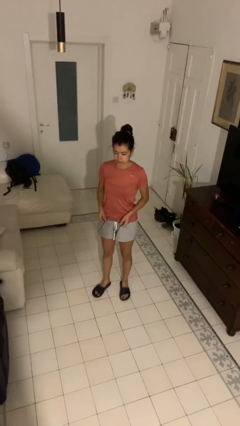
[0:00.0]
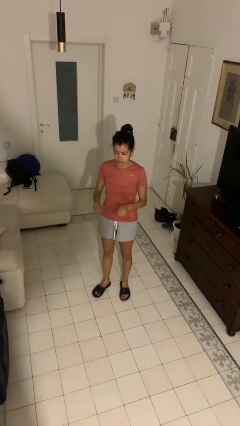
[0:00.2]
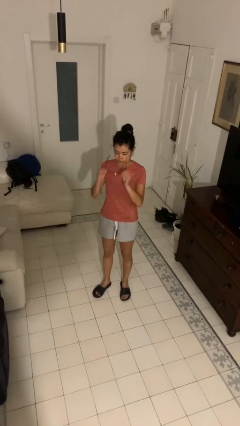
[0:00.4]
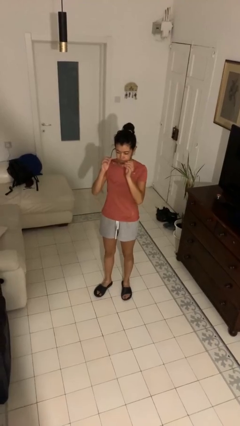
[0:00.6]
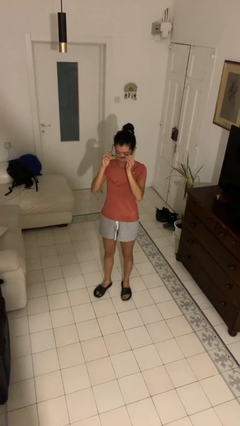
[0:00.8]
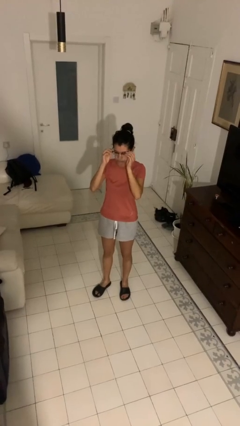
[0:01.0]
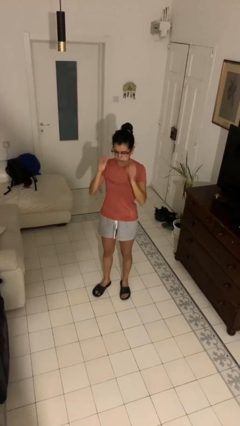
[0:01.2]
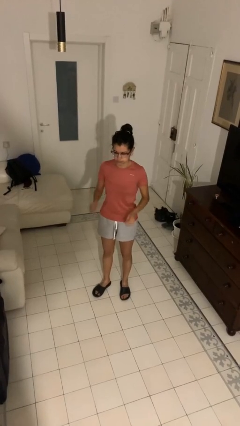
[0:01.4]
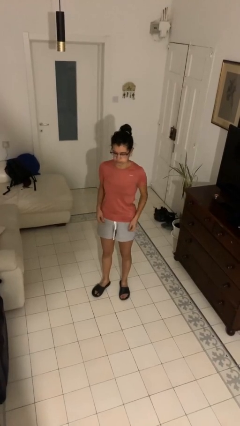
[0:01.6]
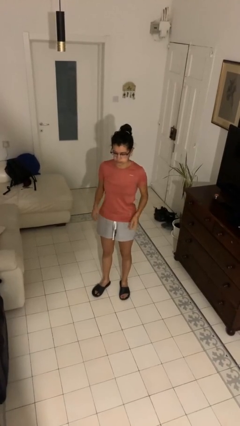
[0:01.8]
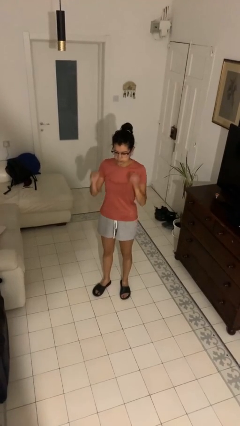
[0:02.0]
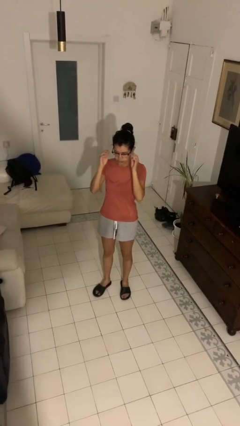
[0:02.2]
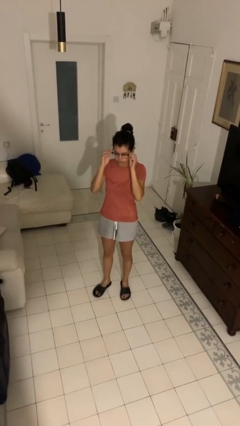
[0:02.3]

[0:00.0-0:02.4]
person puts on glasses

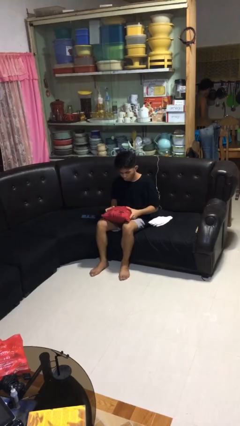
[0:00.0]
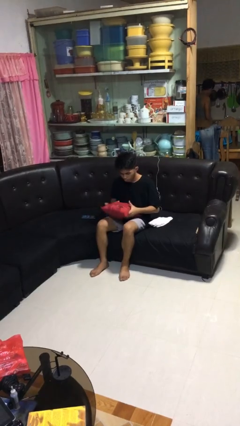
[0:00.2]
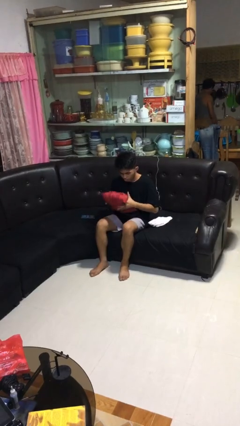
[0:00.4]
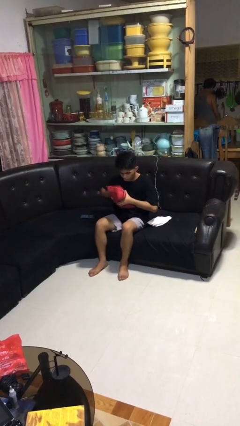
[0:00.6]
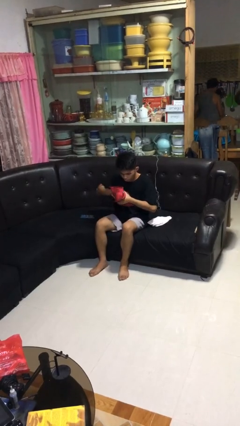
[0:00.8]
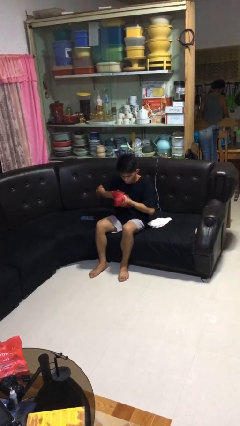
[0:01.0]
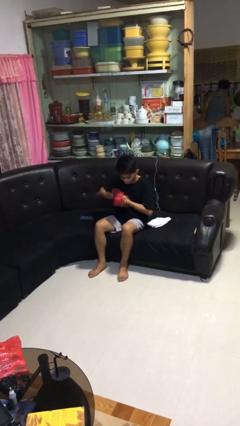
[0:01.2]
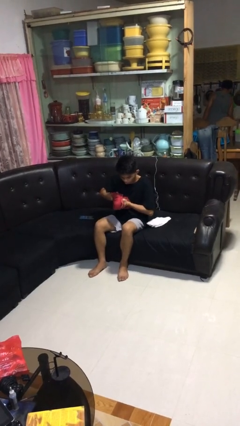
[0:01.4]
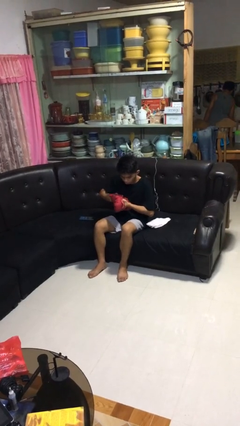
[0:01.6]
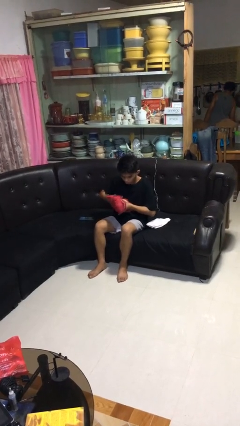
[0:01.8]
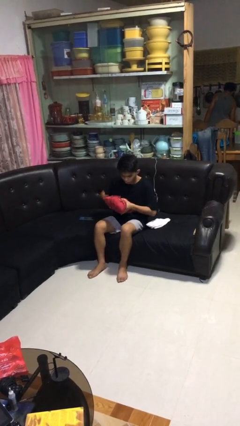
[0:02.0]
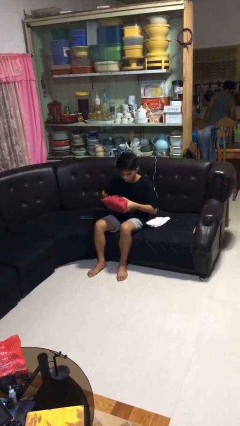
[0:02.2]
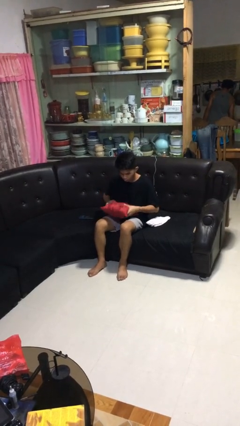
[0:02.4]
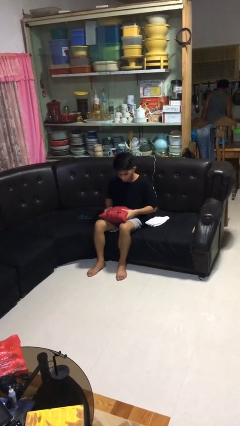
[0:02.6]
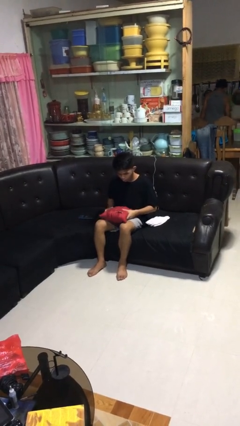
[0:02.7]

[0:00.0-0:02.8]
person squeezes object

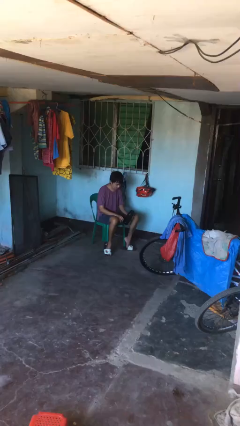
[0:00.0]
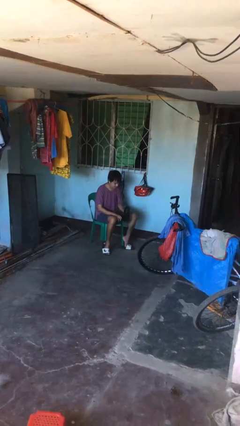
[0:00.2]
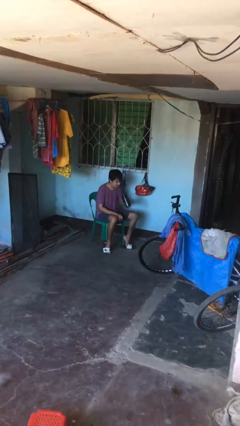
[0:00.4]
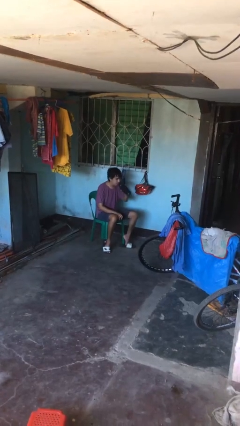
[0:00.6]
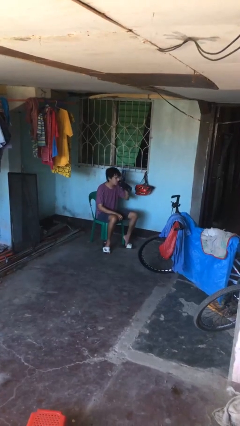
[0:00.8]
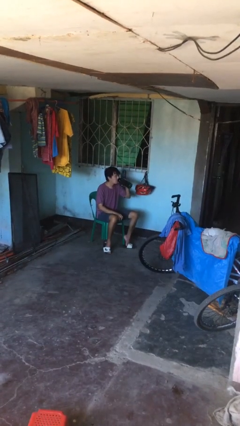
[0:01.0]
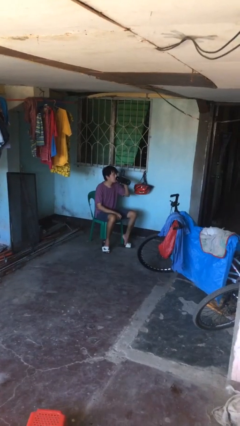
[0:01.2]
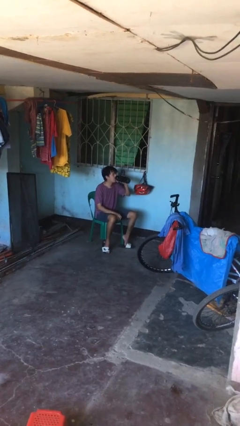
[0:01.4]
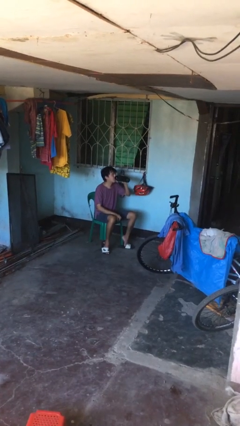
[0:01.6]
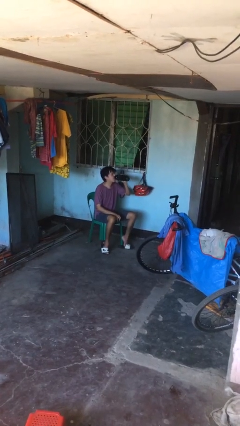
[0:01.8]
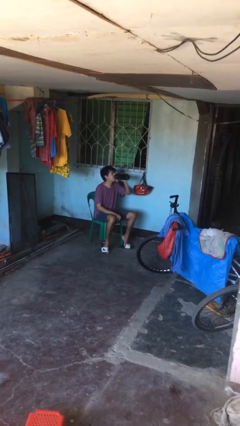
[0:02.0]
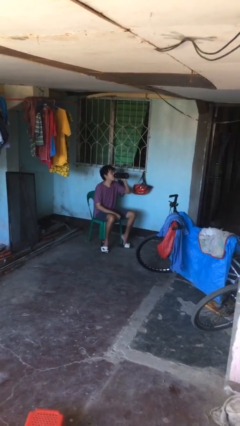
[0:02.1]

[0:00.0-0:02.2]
person drinks from bottle

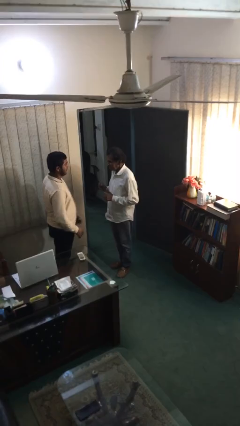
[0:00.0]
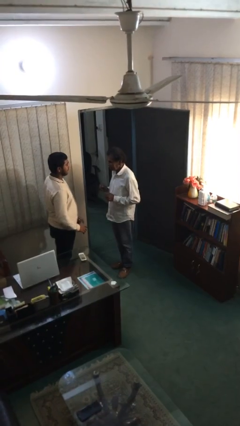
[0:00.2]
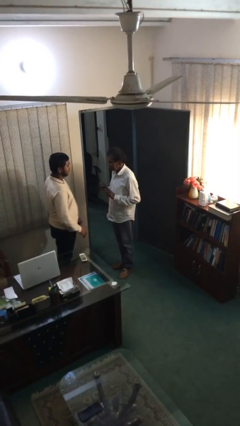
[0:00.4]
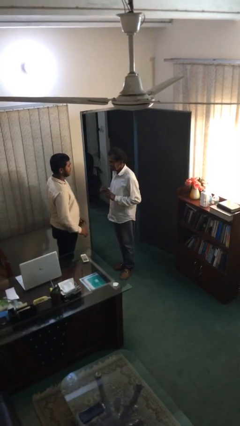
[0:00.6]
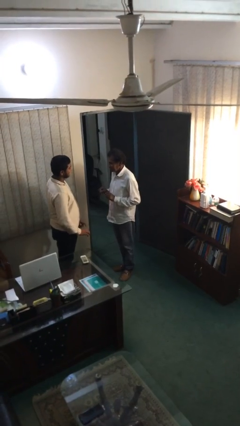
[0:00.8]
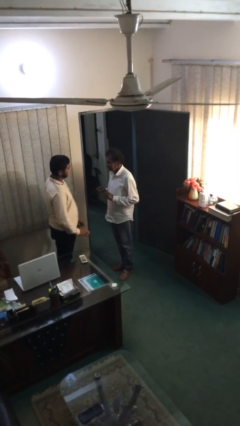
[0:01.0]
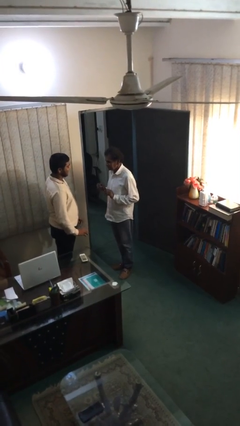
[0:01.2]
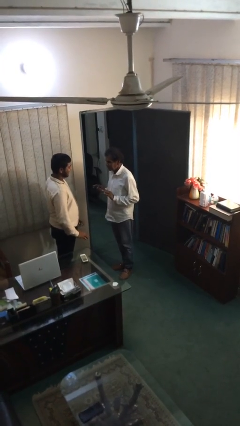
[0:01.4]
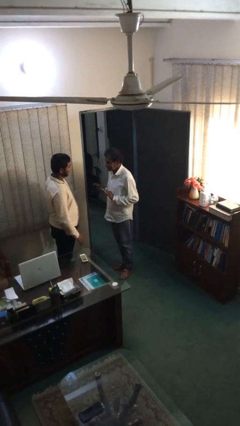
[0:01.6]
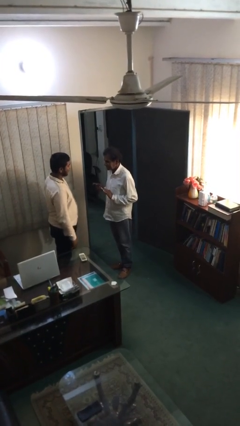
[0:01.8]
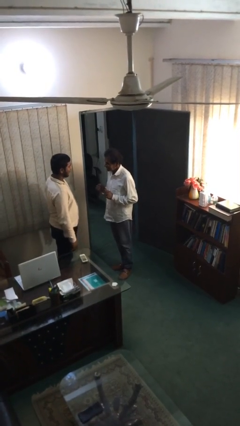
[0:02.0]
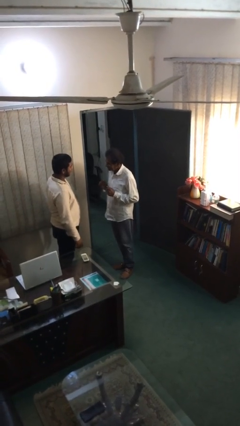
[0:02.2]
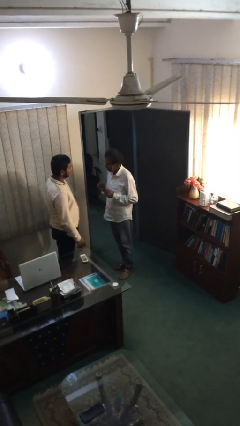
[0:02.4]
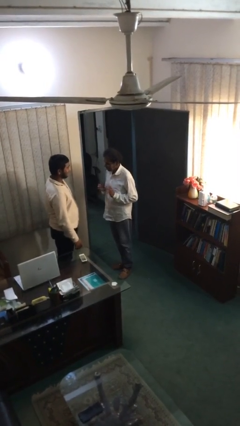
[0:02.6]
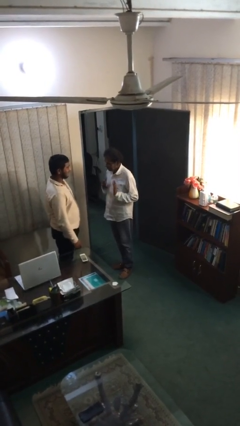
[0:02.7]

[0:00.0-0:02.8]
person talks to person

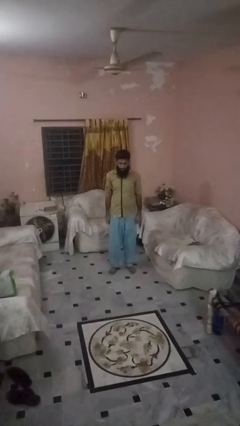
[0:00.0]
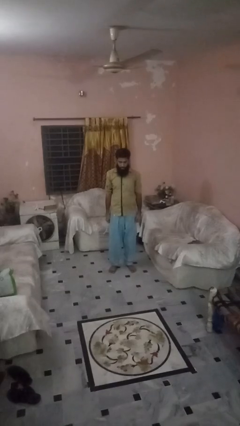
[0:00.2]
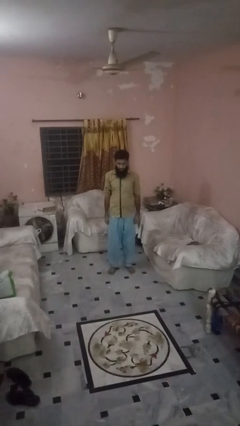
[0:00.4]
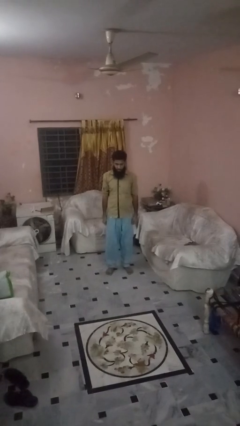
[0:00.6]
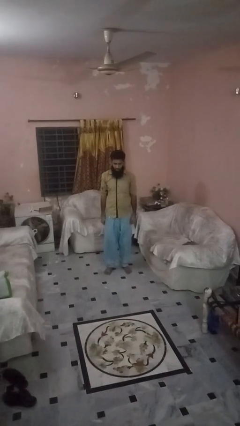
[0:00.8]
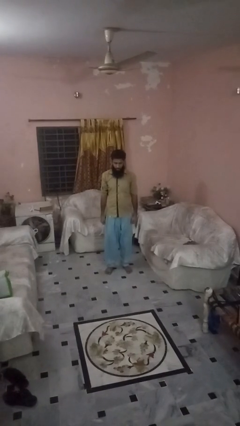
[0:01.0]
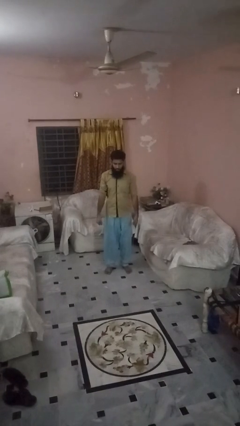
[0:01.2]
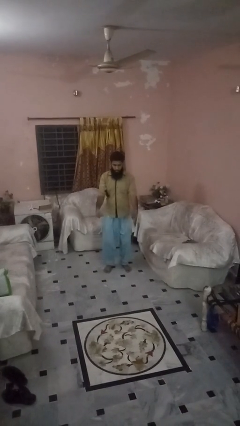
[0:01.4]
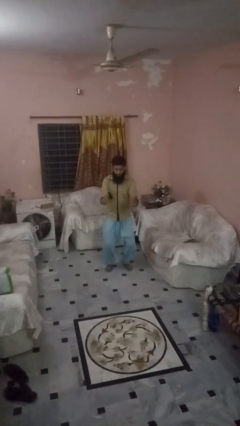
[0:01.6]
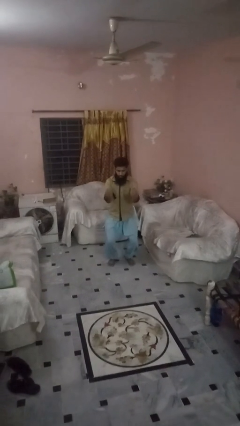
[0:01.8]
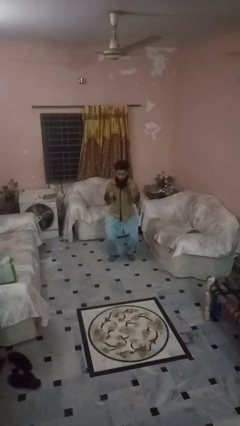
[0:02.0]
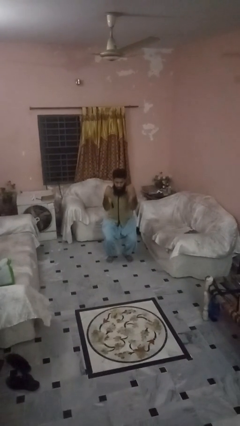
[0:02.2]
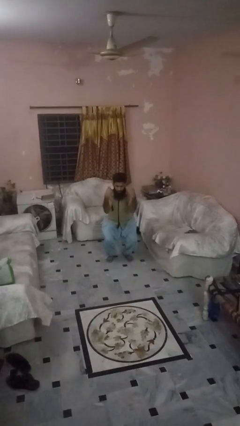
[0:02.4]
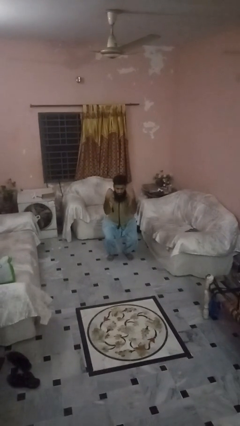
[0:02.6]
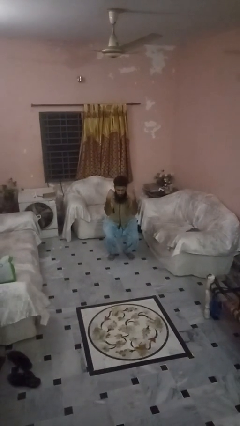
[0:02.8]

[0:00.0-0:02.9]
person squats

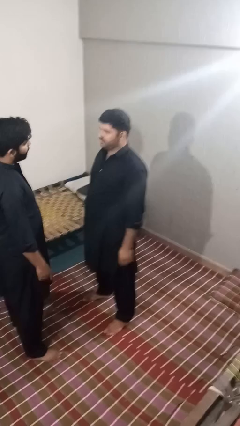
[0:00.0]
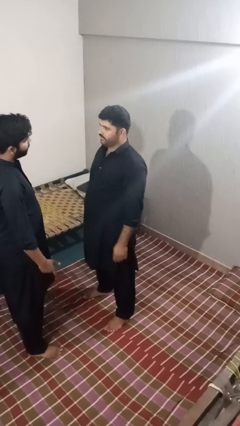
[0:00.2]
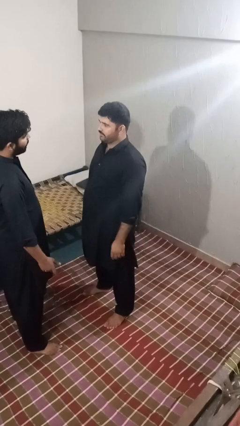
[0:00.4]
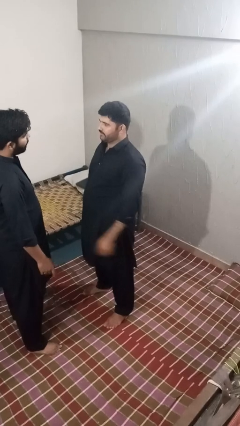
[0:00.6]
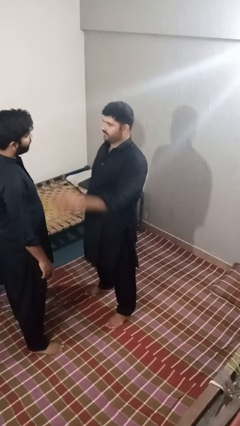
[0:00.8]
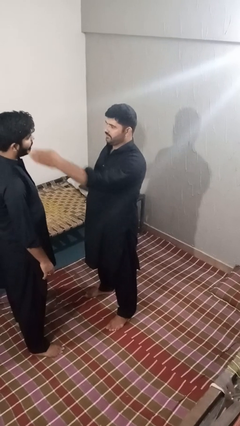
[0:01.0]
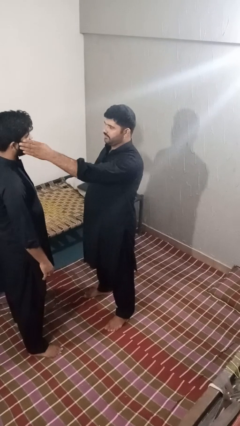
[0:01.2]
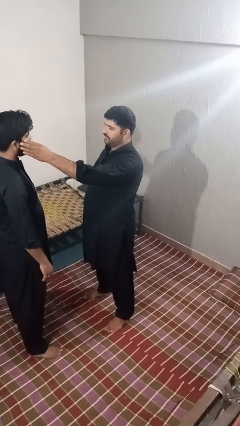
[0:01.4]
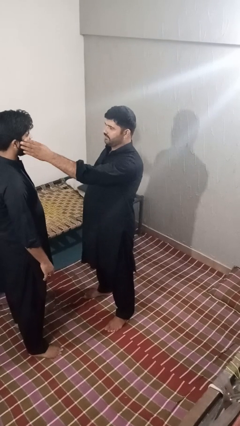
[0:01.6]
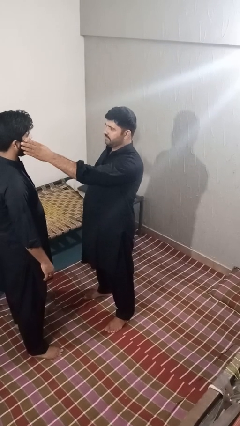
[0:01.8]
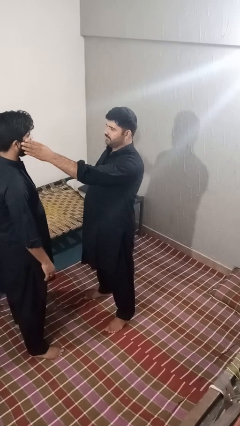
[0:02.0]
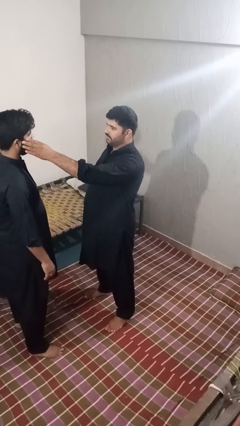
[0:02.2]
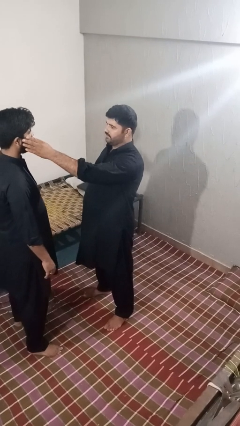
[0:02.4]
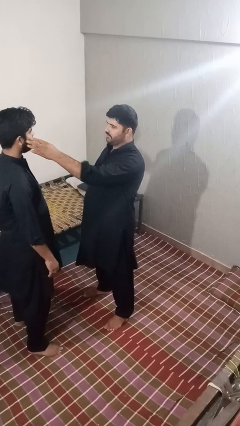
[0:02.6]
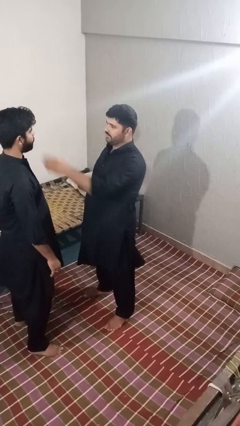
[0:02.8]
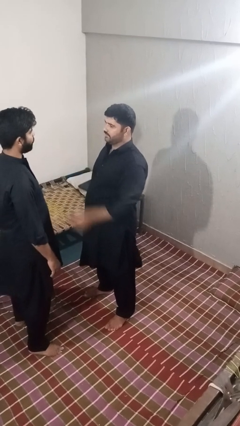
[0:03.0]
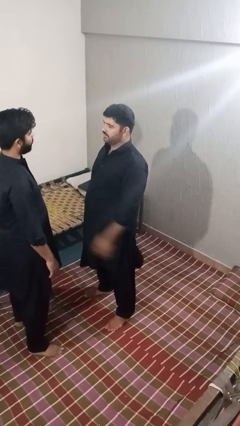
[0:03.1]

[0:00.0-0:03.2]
person touches face of person

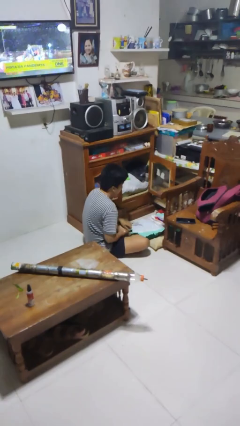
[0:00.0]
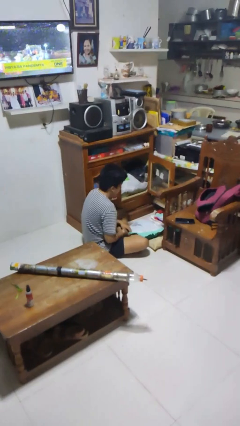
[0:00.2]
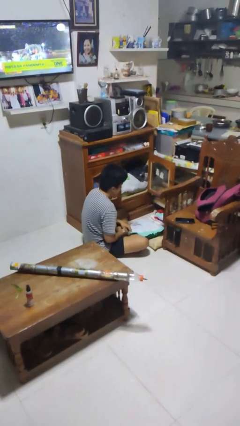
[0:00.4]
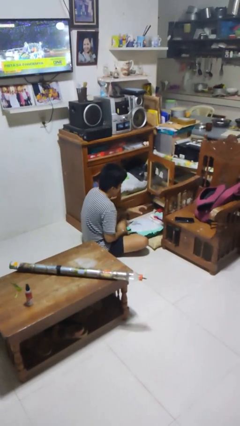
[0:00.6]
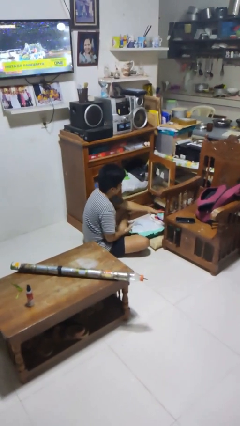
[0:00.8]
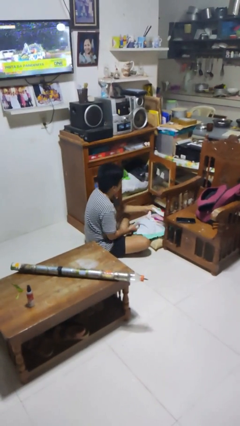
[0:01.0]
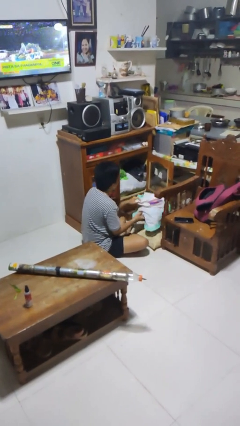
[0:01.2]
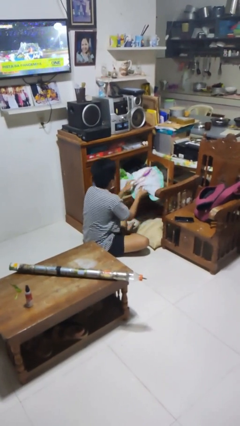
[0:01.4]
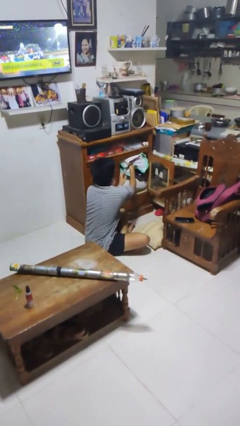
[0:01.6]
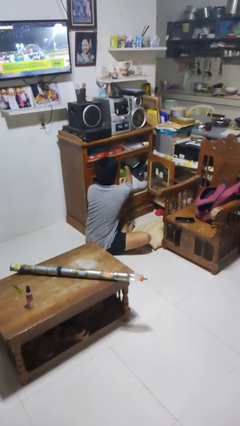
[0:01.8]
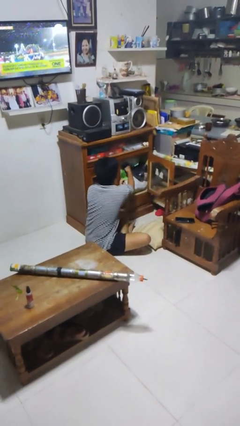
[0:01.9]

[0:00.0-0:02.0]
person takes clothes from dresser
